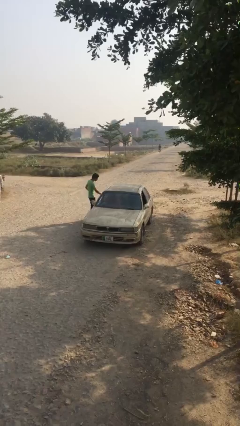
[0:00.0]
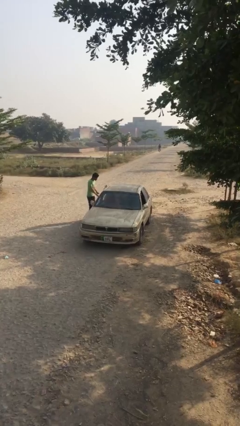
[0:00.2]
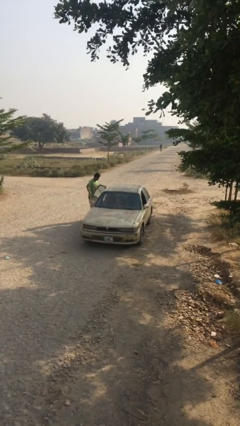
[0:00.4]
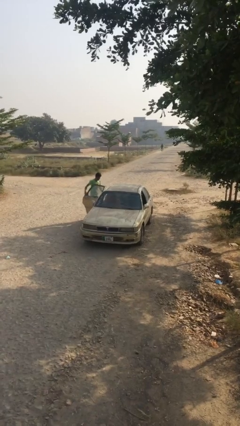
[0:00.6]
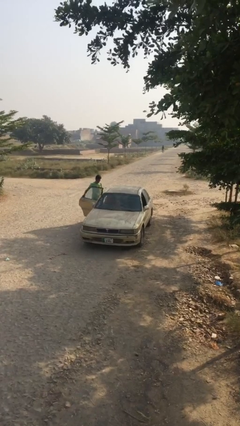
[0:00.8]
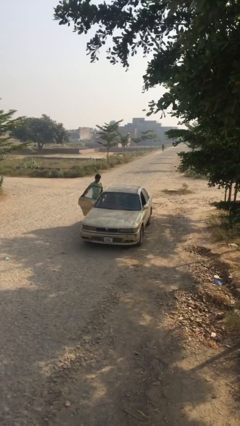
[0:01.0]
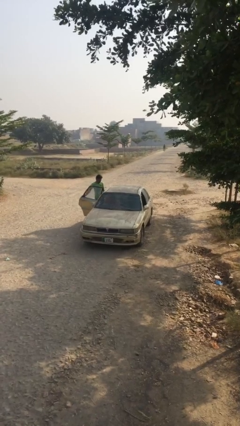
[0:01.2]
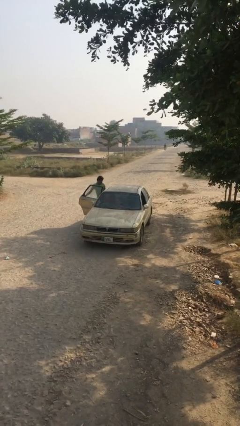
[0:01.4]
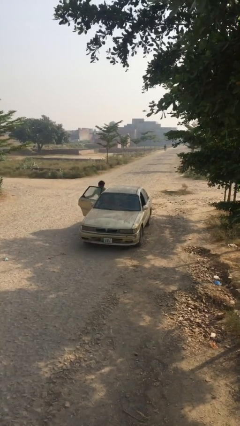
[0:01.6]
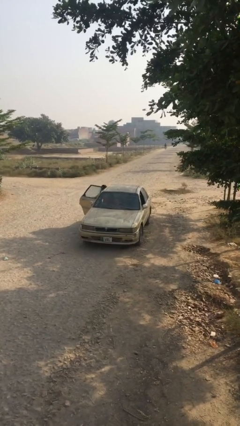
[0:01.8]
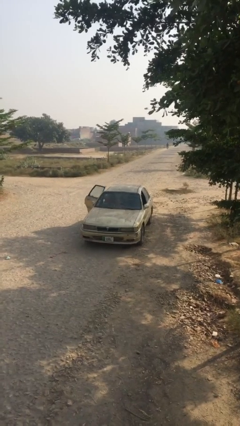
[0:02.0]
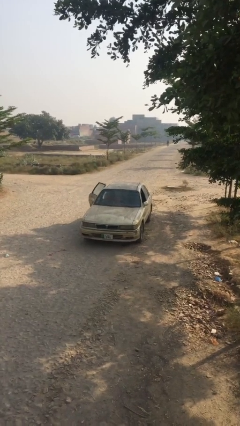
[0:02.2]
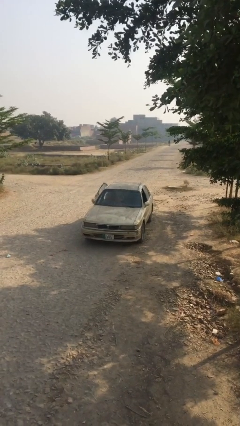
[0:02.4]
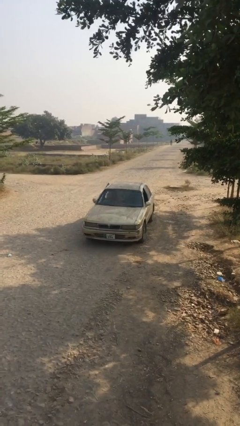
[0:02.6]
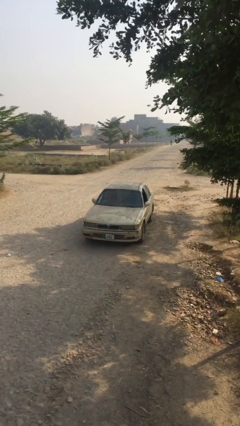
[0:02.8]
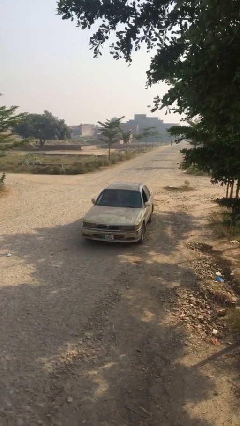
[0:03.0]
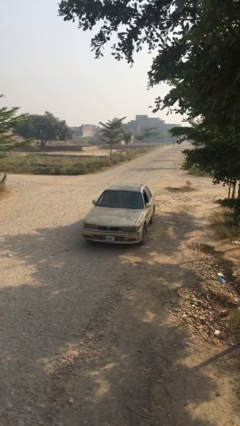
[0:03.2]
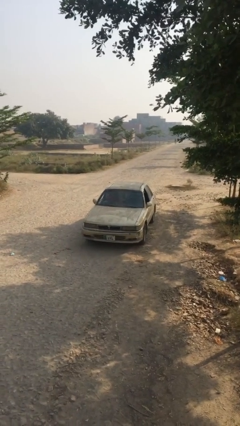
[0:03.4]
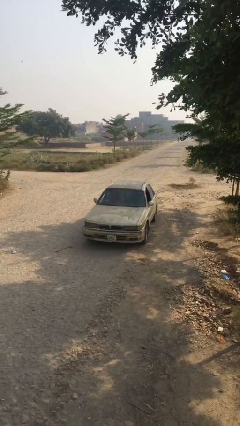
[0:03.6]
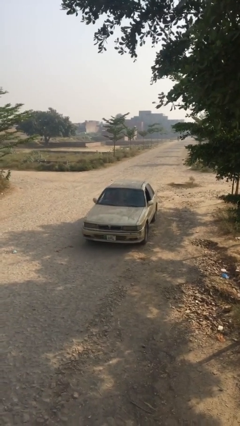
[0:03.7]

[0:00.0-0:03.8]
car picks up person

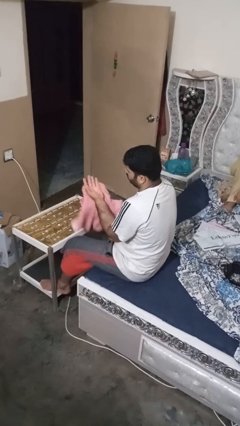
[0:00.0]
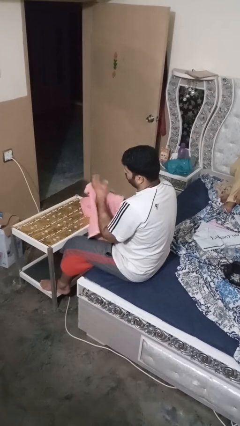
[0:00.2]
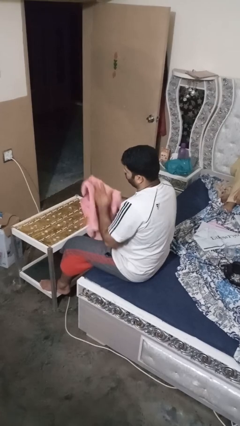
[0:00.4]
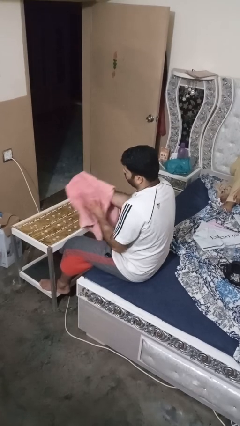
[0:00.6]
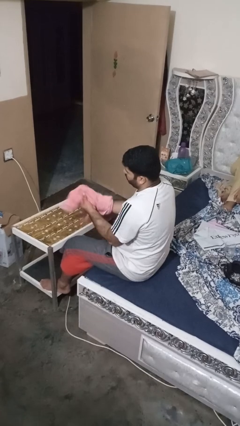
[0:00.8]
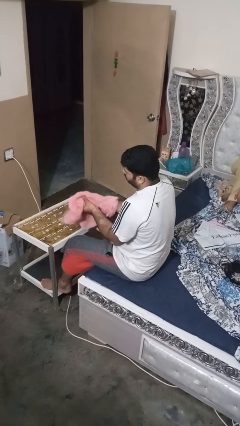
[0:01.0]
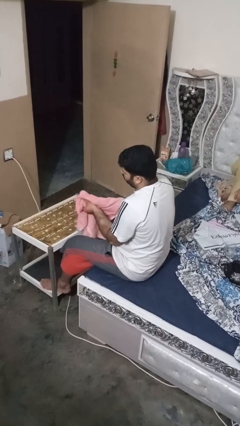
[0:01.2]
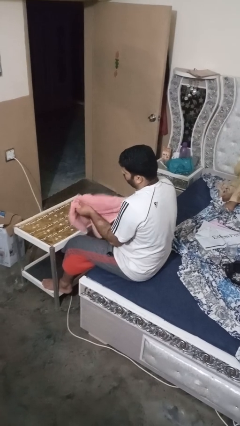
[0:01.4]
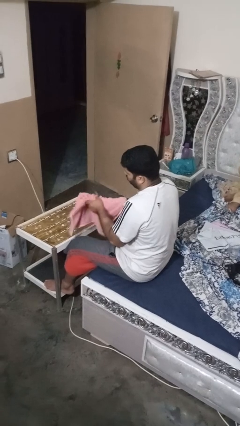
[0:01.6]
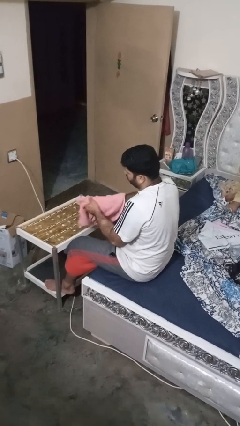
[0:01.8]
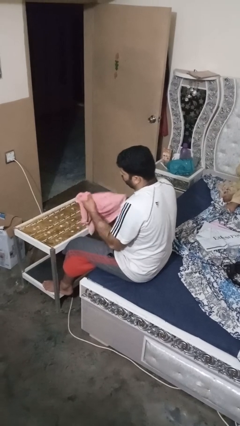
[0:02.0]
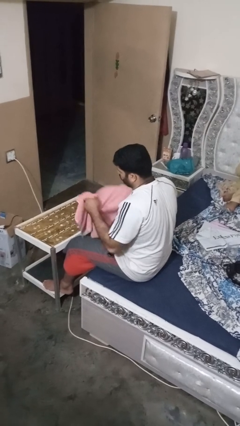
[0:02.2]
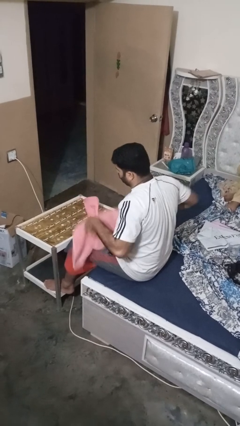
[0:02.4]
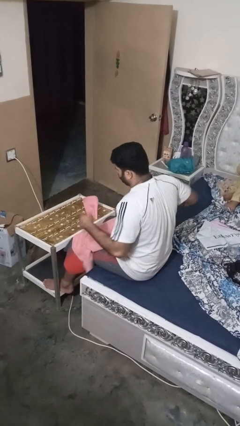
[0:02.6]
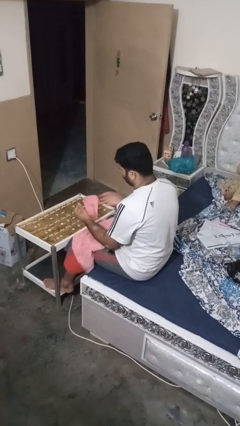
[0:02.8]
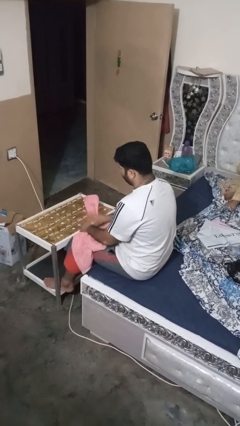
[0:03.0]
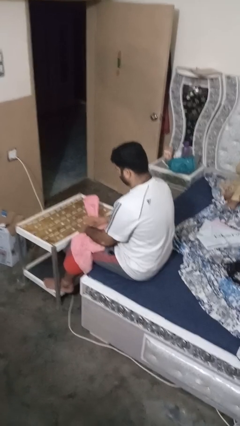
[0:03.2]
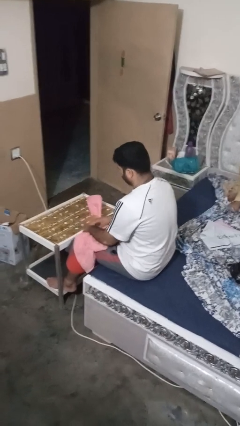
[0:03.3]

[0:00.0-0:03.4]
person dries hands with towel

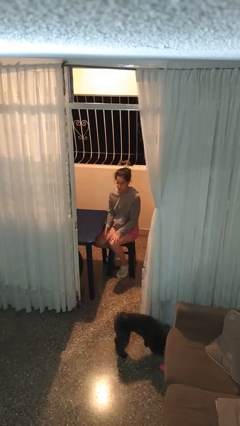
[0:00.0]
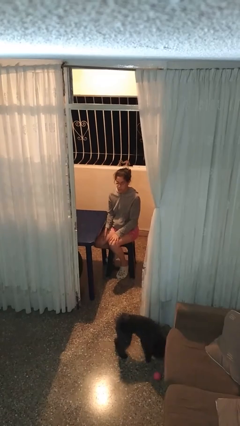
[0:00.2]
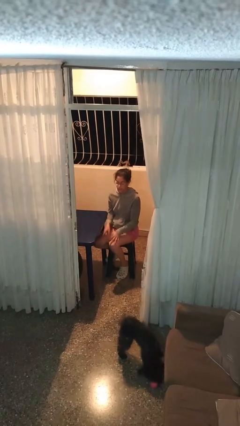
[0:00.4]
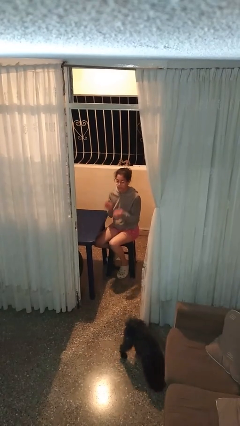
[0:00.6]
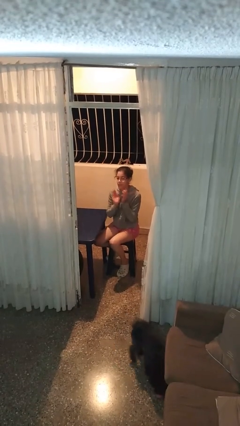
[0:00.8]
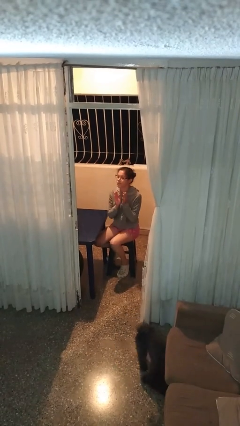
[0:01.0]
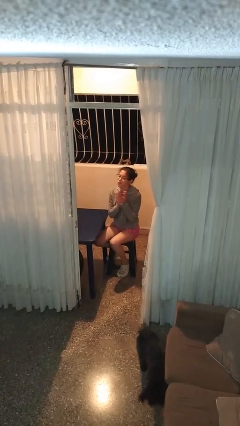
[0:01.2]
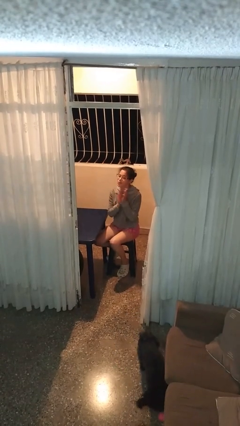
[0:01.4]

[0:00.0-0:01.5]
person claps hands

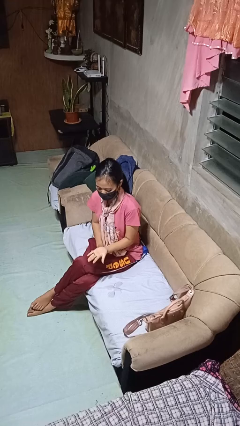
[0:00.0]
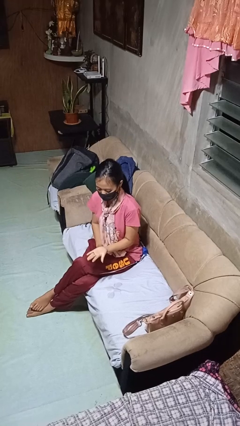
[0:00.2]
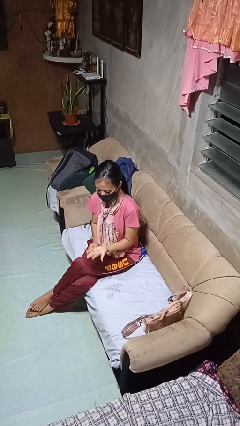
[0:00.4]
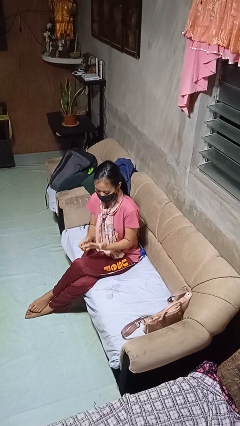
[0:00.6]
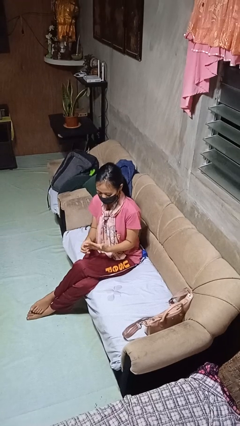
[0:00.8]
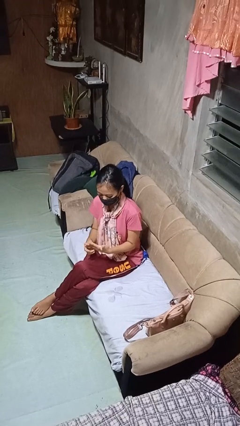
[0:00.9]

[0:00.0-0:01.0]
person takes off ring

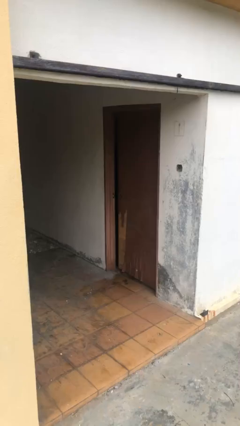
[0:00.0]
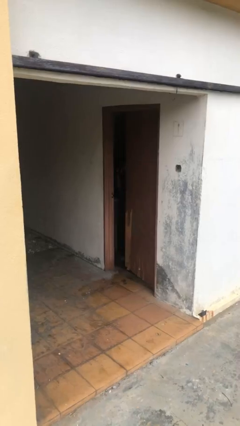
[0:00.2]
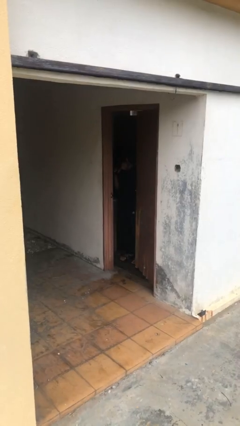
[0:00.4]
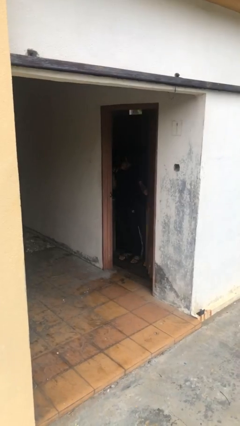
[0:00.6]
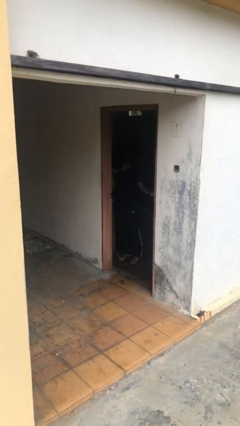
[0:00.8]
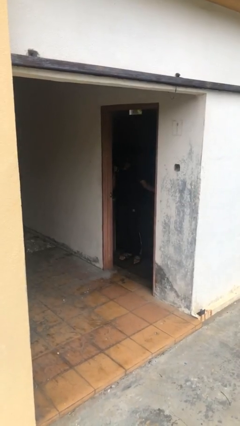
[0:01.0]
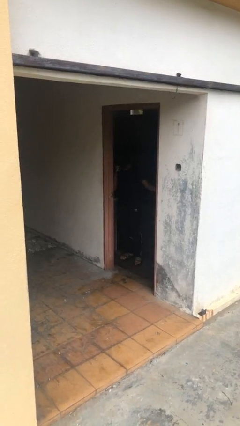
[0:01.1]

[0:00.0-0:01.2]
person opens facility door

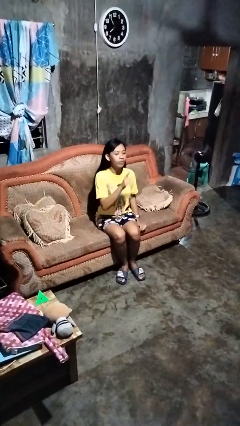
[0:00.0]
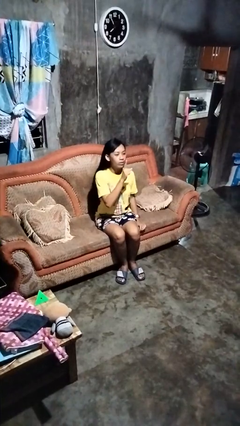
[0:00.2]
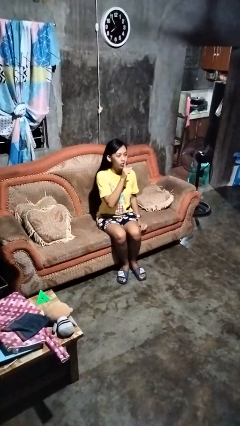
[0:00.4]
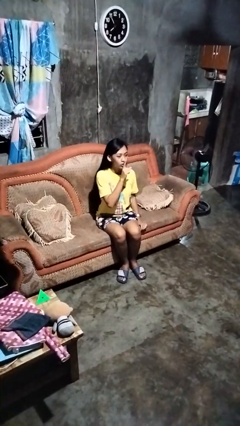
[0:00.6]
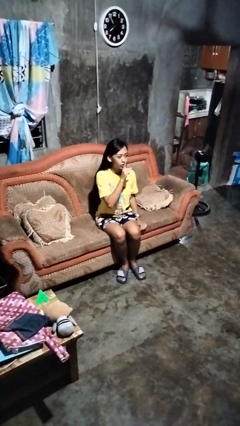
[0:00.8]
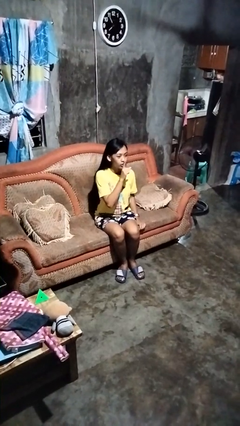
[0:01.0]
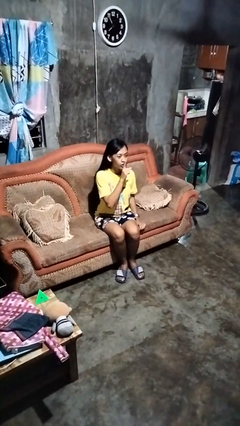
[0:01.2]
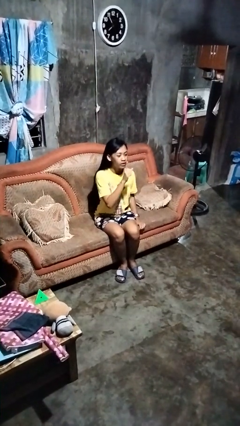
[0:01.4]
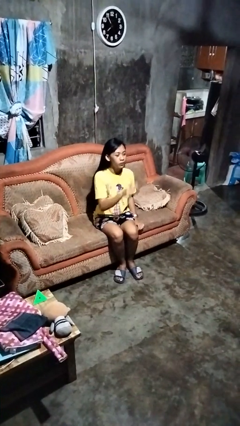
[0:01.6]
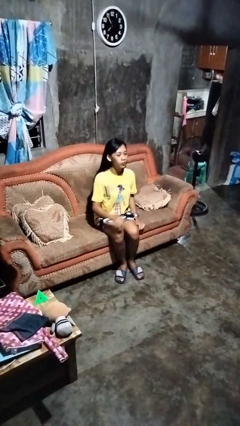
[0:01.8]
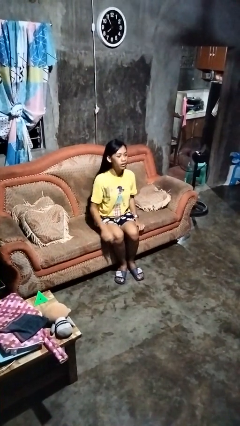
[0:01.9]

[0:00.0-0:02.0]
person gestures be quiet

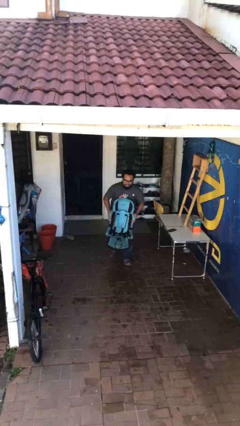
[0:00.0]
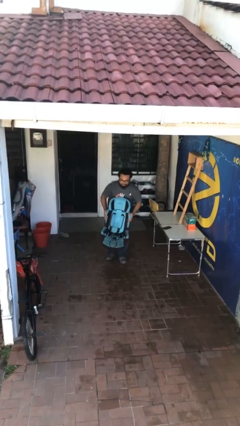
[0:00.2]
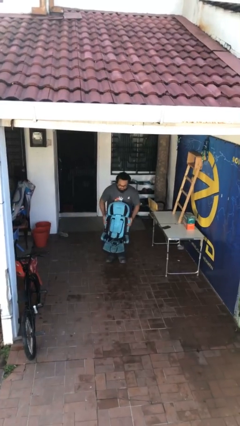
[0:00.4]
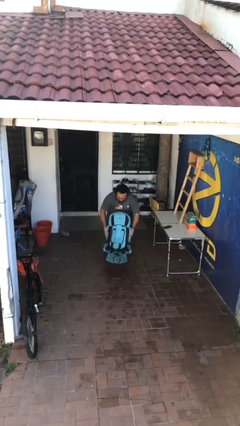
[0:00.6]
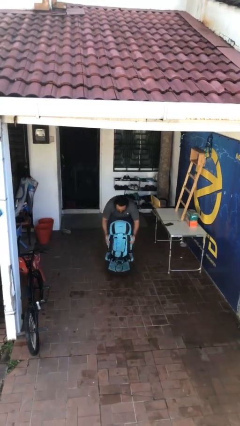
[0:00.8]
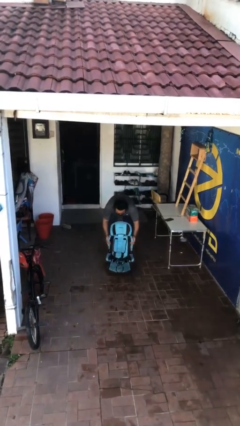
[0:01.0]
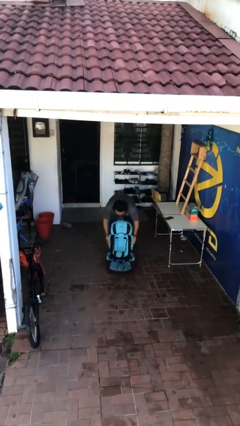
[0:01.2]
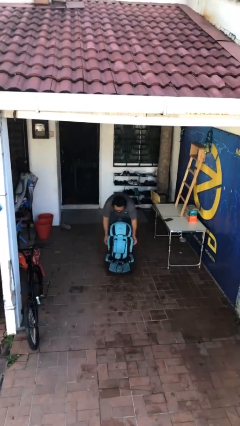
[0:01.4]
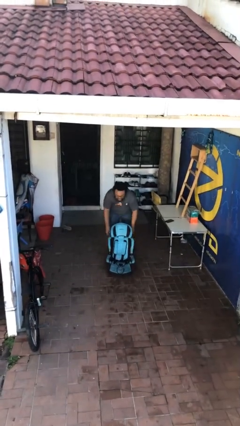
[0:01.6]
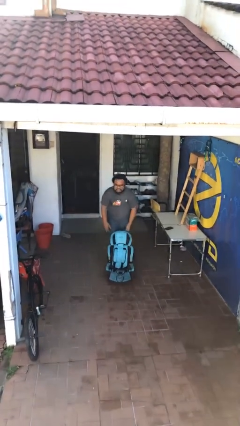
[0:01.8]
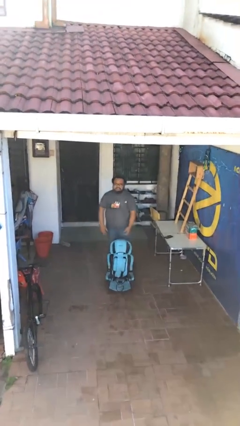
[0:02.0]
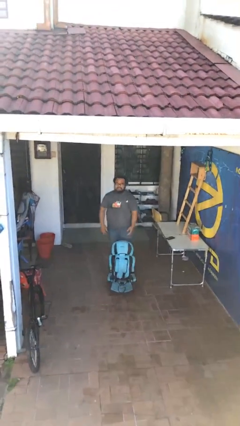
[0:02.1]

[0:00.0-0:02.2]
person puts down object on floor

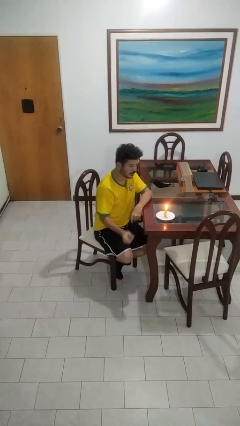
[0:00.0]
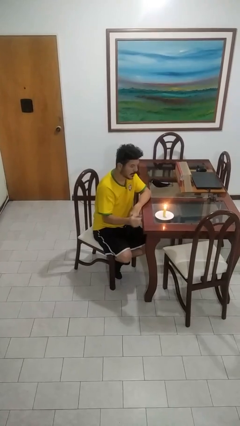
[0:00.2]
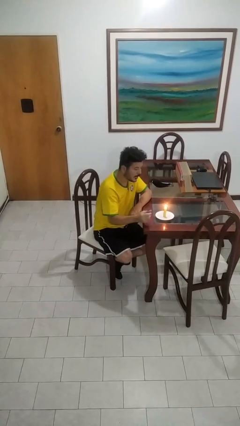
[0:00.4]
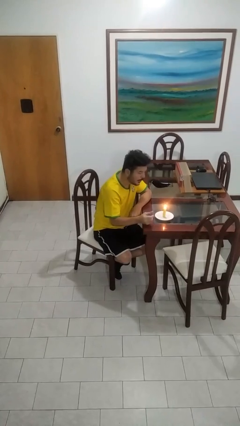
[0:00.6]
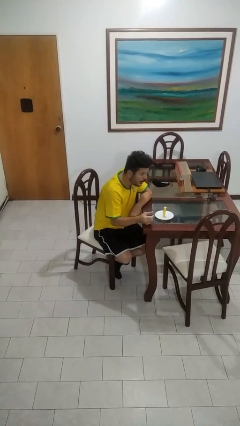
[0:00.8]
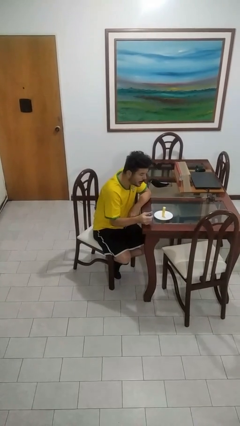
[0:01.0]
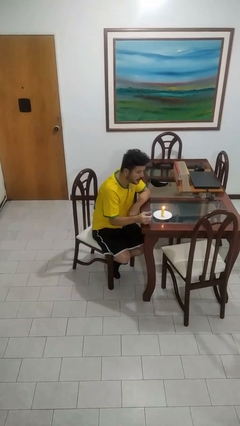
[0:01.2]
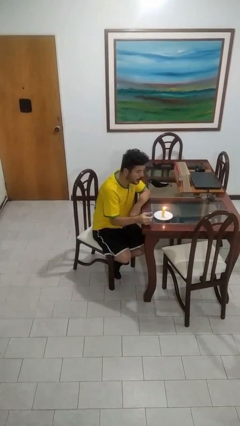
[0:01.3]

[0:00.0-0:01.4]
person extinguishes candle
